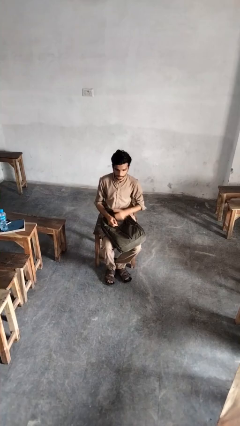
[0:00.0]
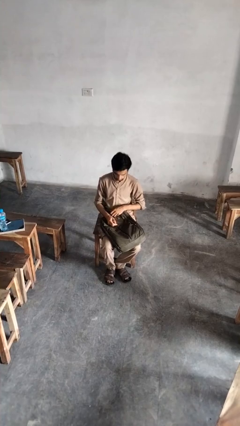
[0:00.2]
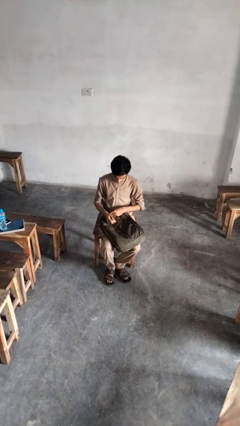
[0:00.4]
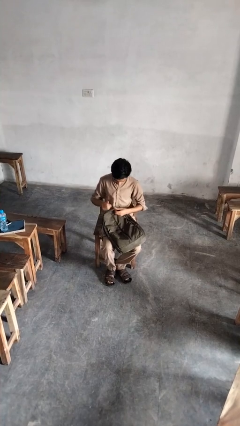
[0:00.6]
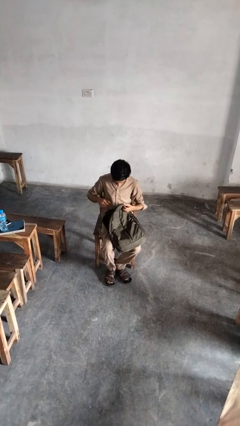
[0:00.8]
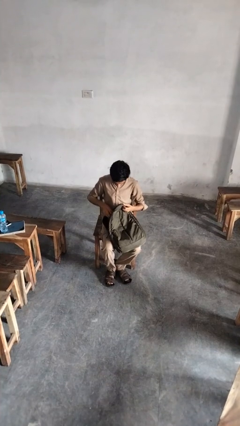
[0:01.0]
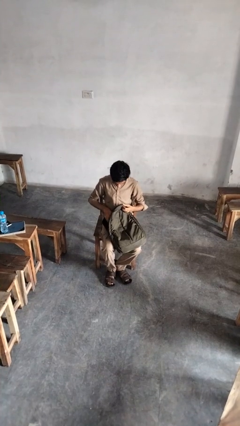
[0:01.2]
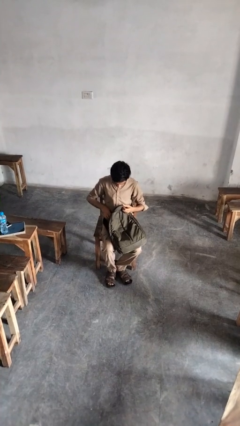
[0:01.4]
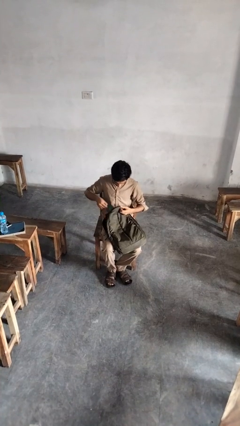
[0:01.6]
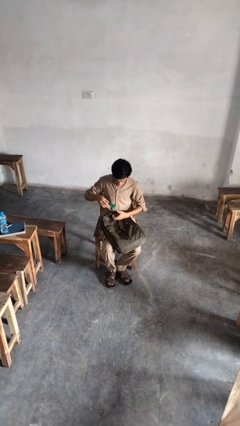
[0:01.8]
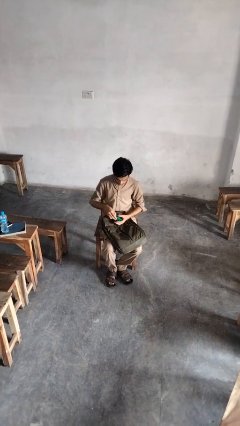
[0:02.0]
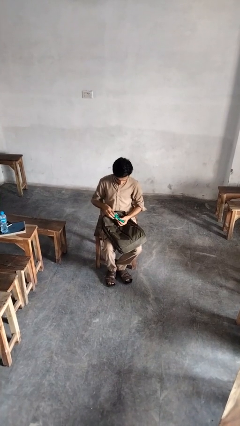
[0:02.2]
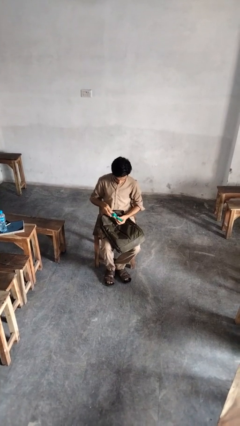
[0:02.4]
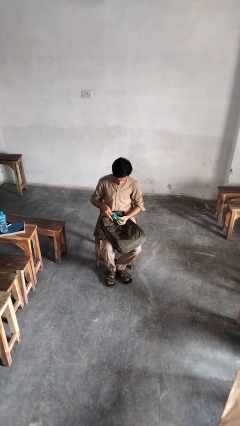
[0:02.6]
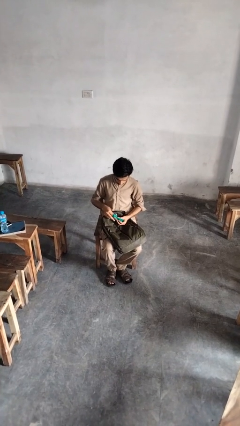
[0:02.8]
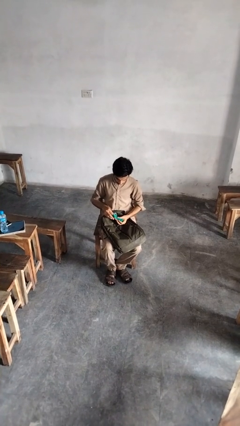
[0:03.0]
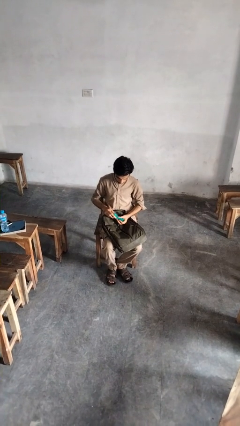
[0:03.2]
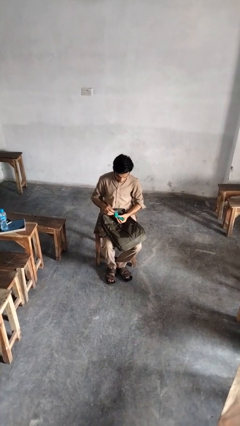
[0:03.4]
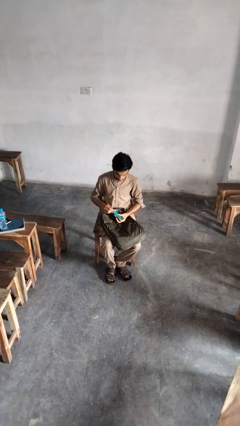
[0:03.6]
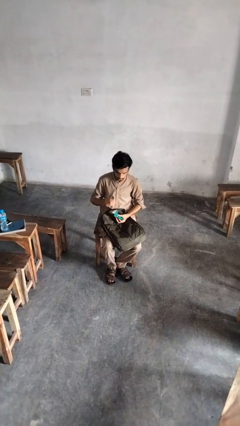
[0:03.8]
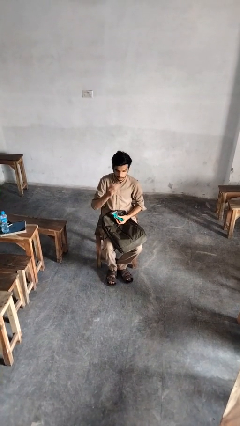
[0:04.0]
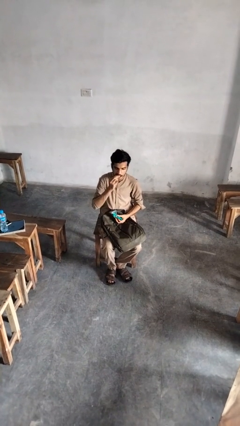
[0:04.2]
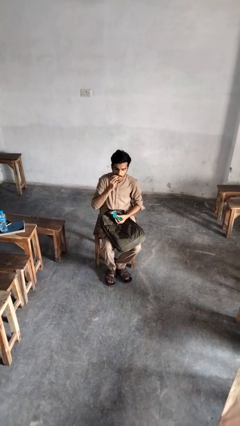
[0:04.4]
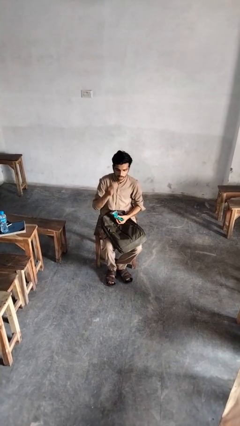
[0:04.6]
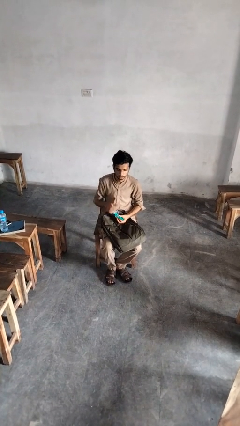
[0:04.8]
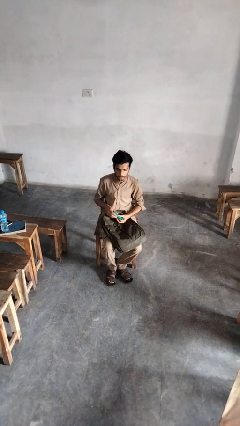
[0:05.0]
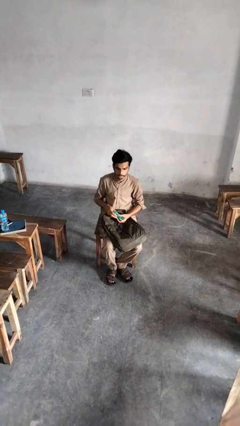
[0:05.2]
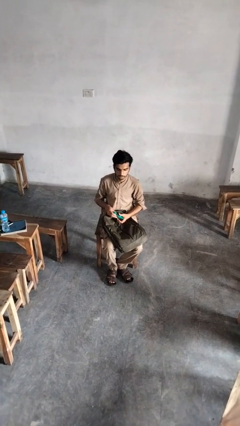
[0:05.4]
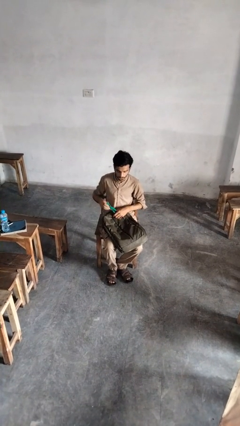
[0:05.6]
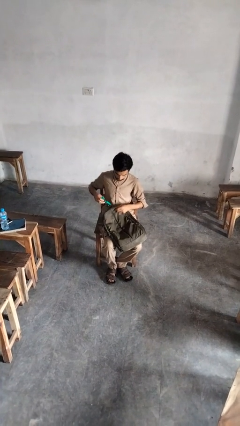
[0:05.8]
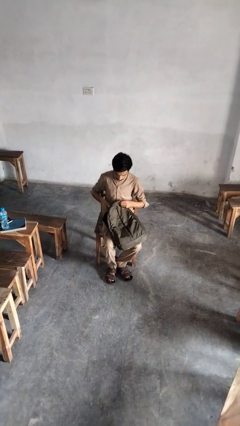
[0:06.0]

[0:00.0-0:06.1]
person eats snack from bag

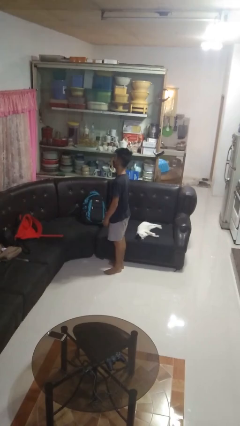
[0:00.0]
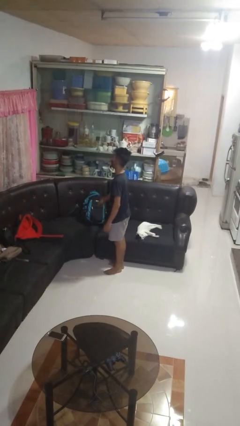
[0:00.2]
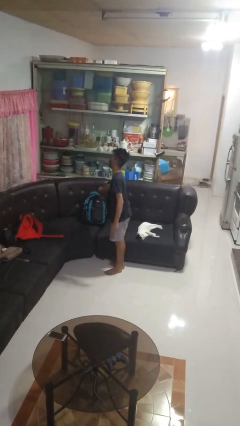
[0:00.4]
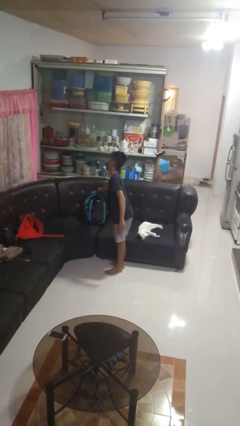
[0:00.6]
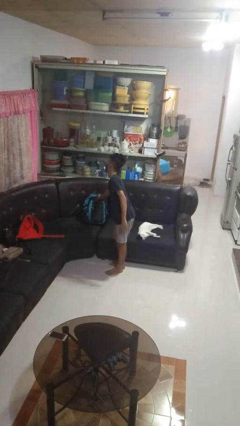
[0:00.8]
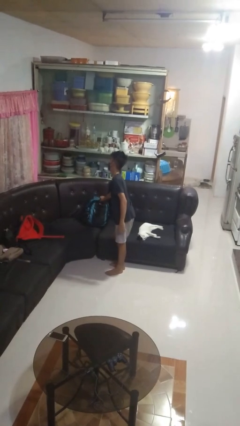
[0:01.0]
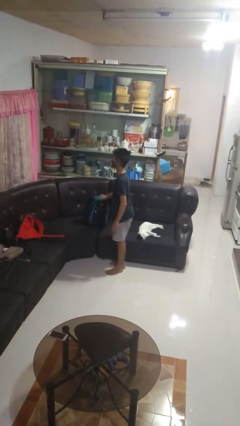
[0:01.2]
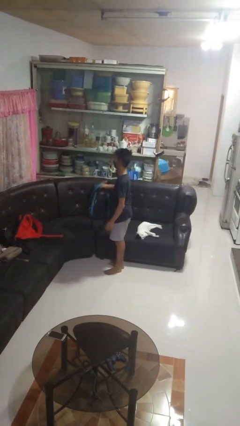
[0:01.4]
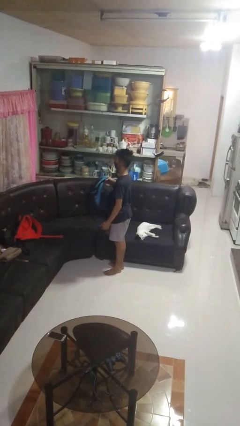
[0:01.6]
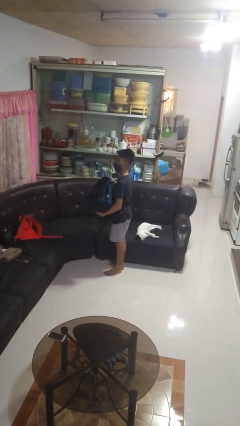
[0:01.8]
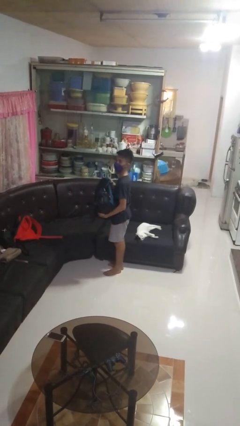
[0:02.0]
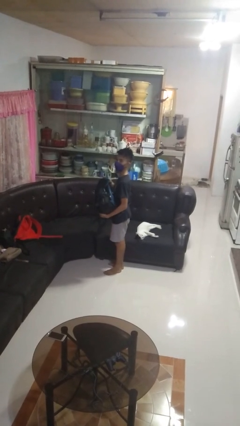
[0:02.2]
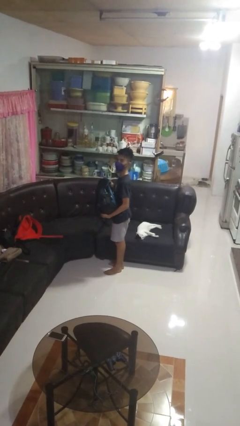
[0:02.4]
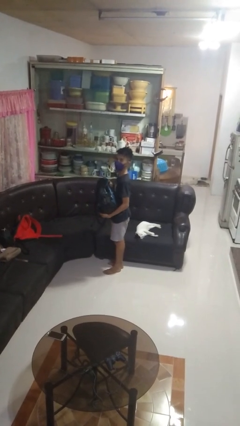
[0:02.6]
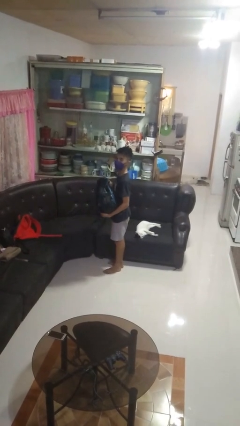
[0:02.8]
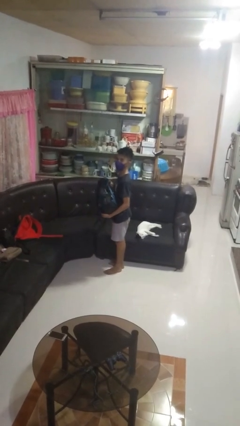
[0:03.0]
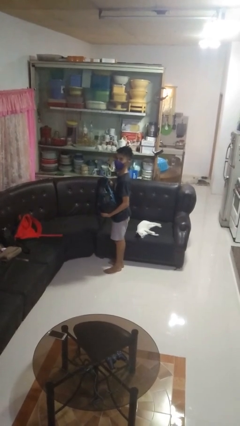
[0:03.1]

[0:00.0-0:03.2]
person picks up object from couch

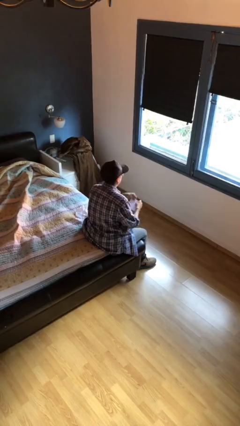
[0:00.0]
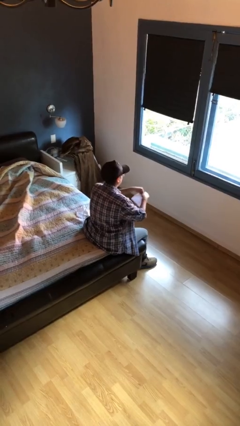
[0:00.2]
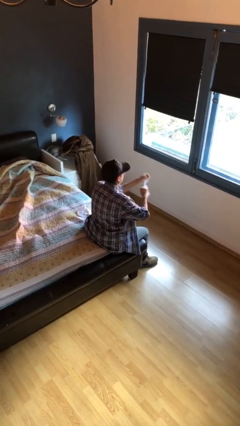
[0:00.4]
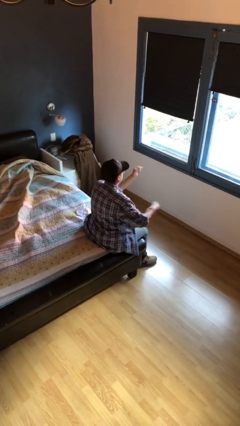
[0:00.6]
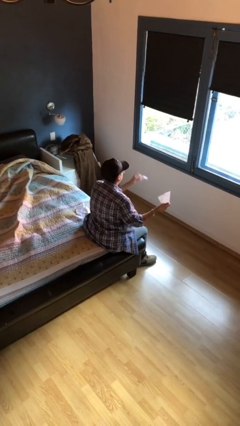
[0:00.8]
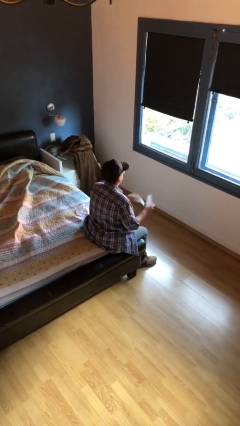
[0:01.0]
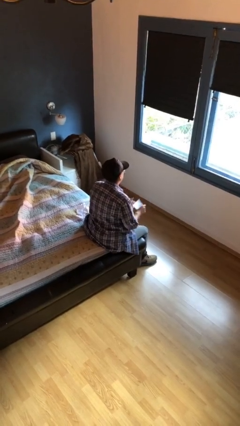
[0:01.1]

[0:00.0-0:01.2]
person tears paper

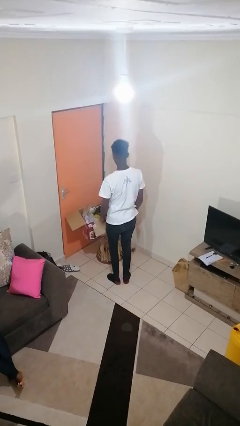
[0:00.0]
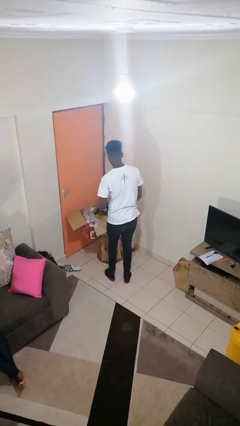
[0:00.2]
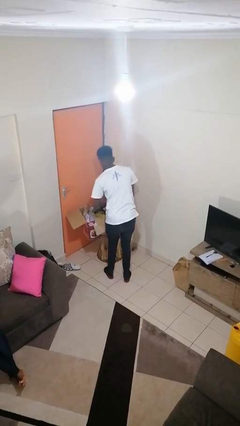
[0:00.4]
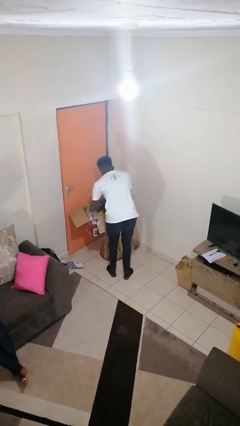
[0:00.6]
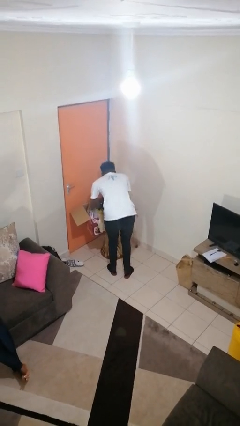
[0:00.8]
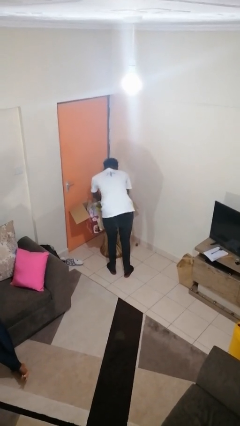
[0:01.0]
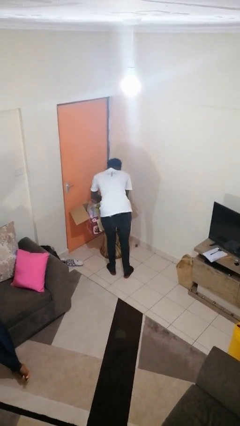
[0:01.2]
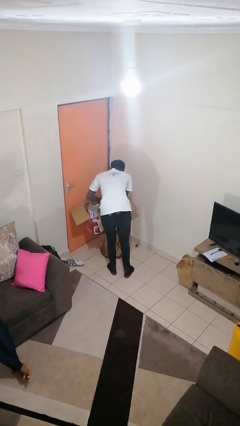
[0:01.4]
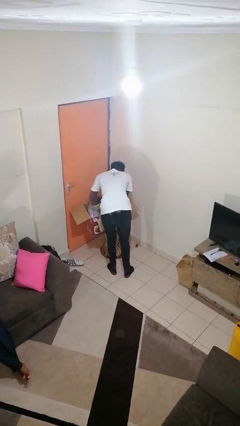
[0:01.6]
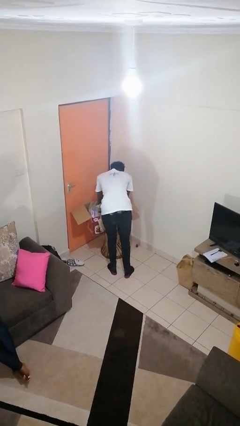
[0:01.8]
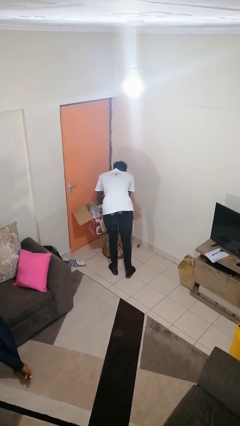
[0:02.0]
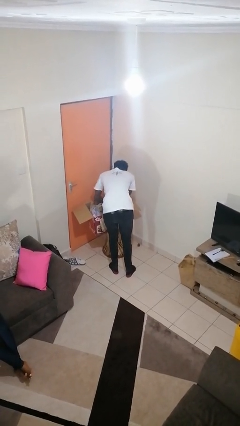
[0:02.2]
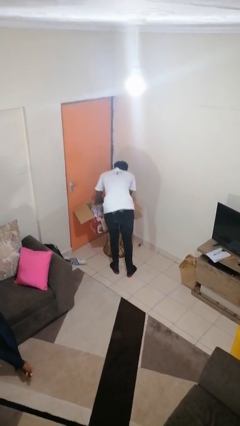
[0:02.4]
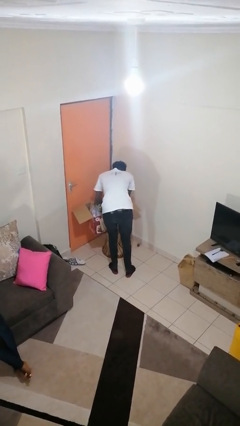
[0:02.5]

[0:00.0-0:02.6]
person searches in box

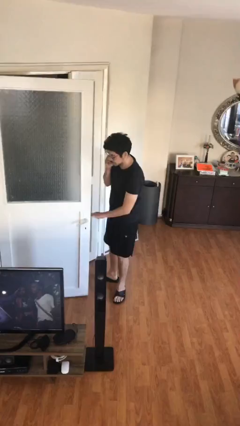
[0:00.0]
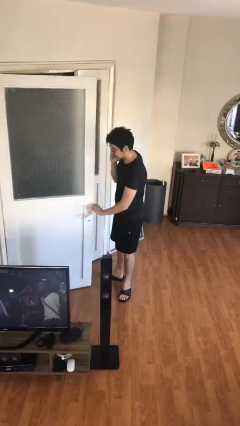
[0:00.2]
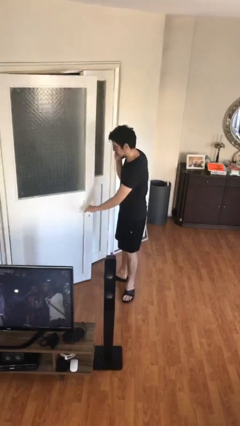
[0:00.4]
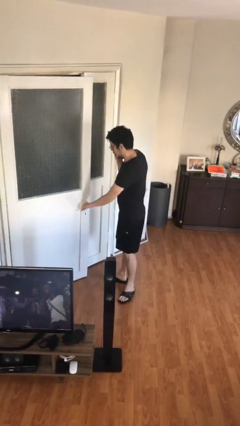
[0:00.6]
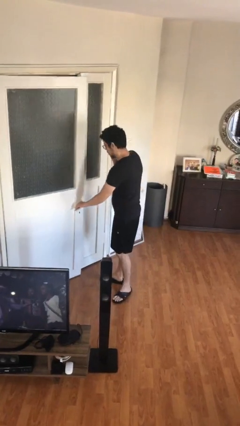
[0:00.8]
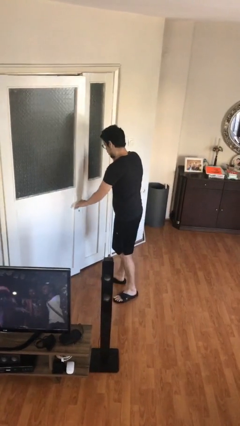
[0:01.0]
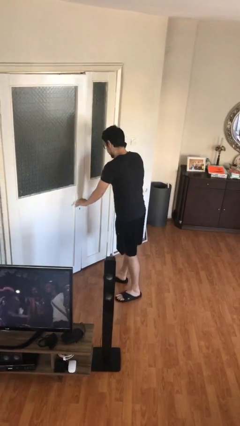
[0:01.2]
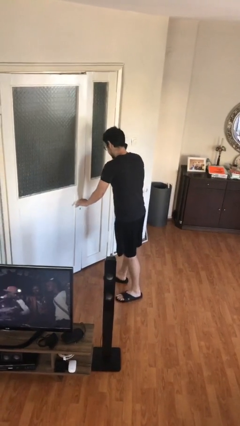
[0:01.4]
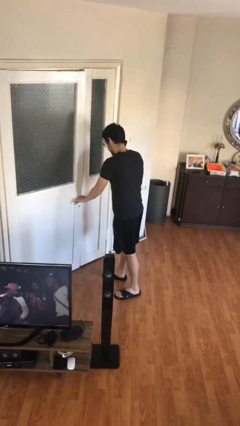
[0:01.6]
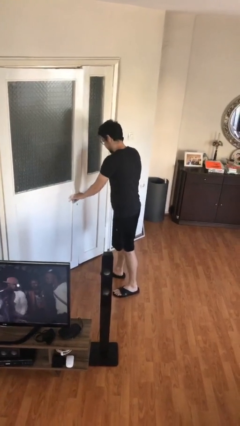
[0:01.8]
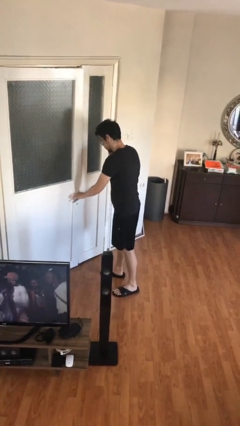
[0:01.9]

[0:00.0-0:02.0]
person closes facility door

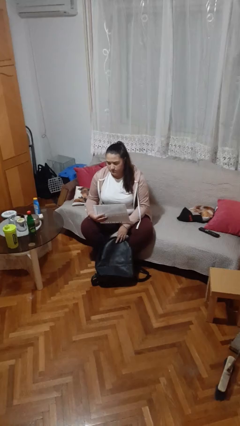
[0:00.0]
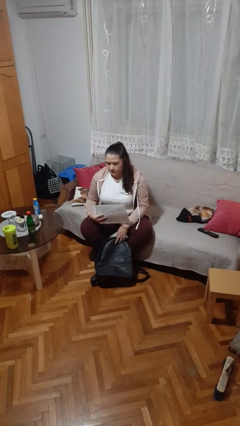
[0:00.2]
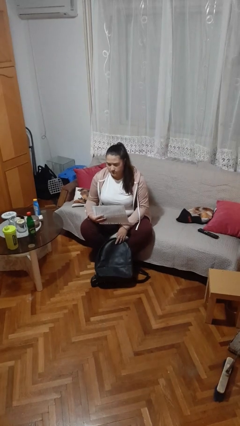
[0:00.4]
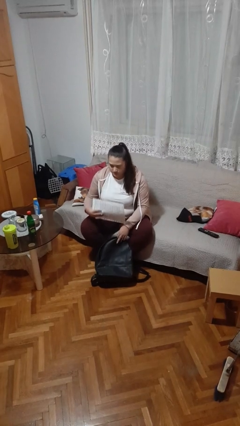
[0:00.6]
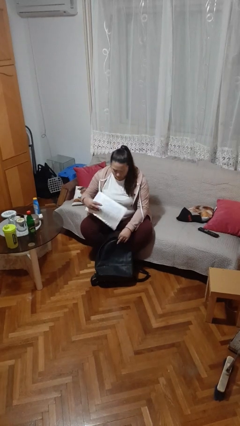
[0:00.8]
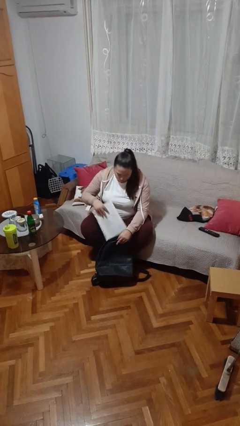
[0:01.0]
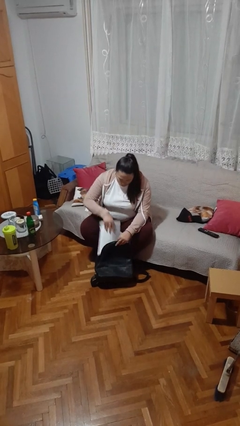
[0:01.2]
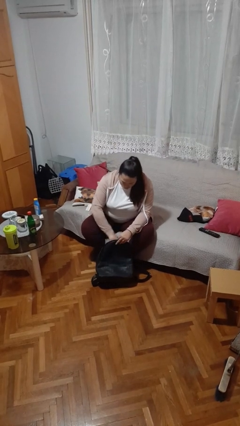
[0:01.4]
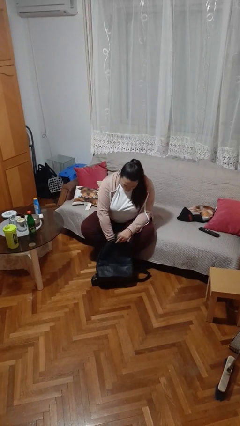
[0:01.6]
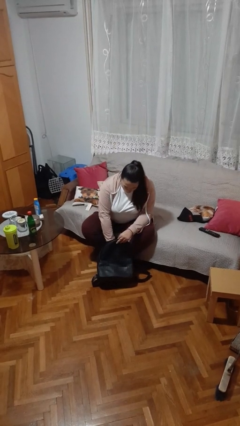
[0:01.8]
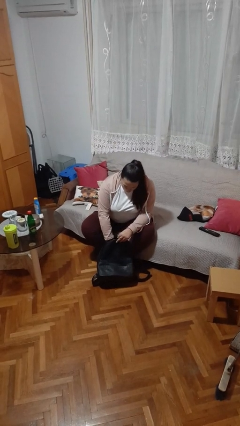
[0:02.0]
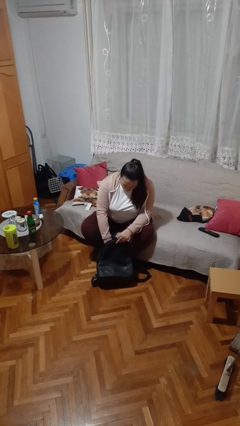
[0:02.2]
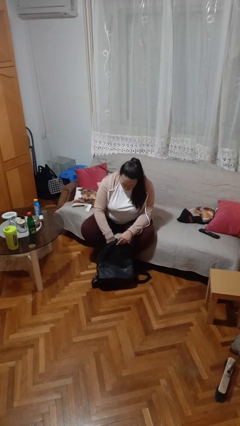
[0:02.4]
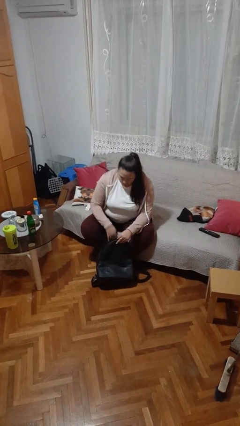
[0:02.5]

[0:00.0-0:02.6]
person puts object into backpack
